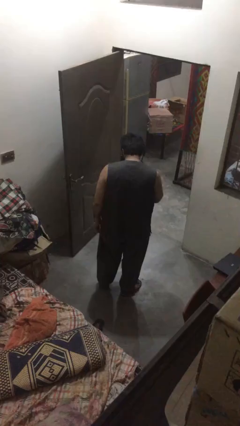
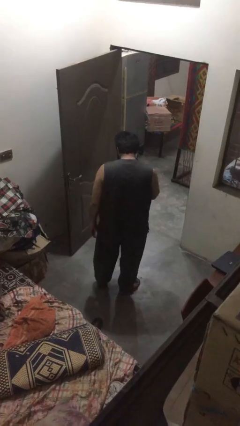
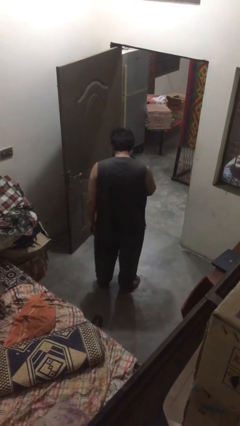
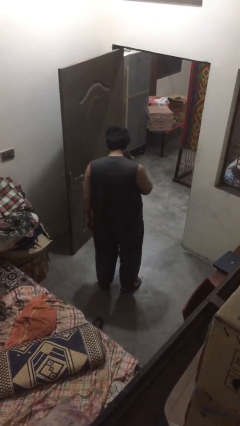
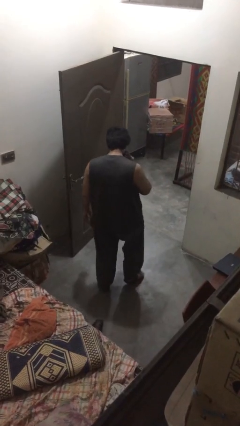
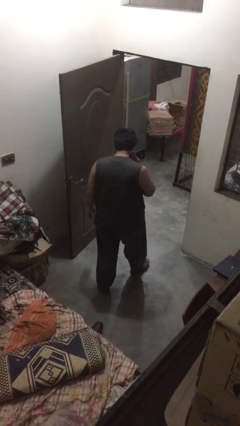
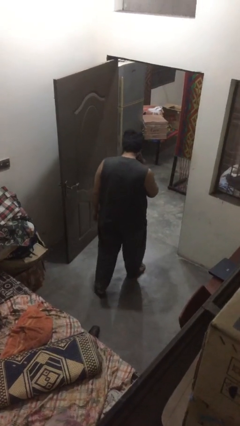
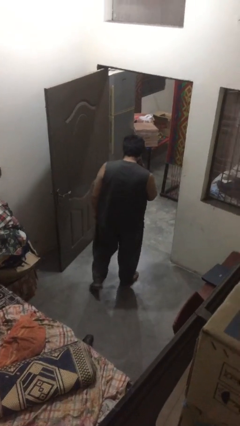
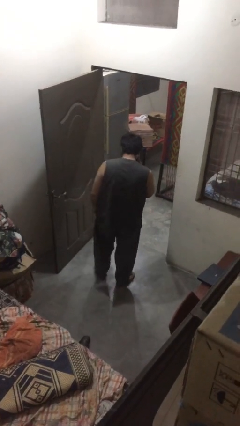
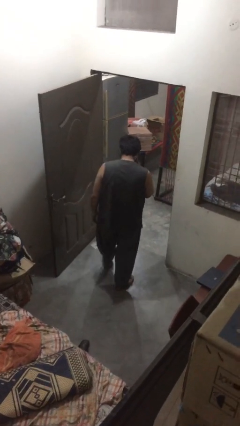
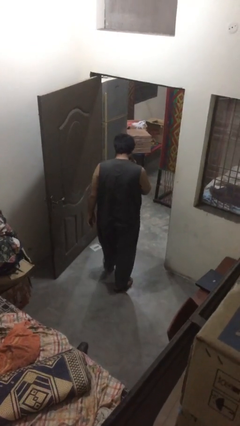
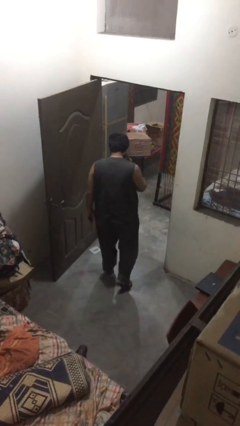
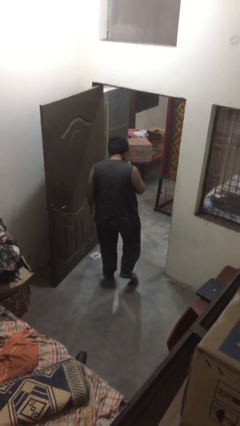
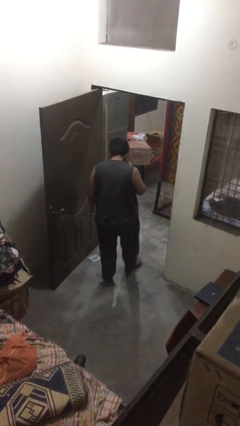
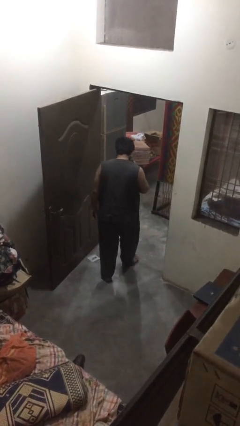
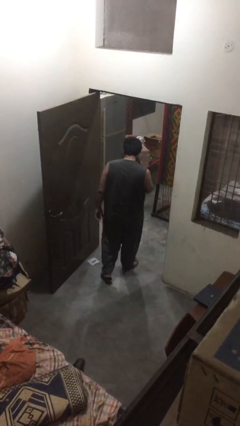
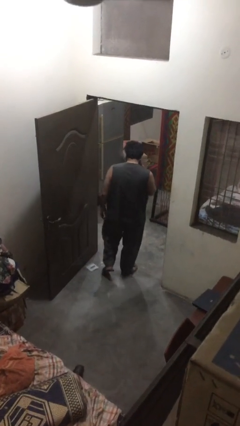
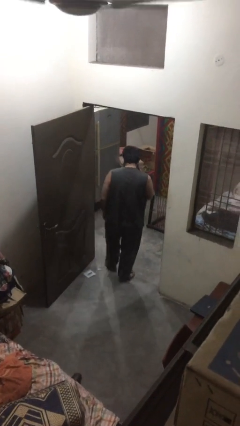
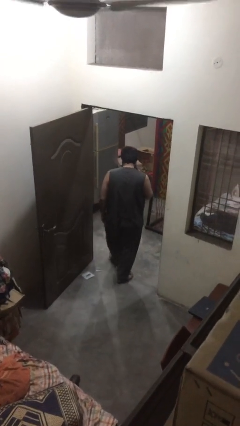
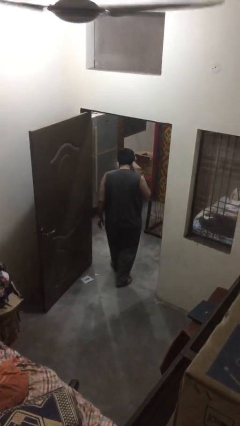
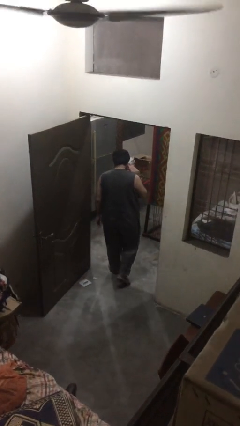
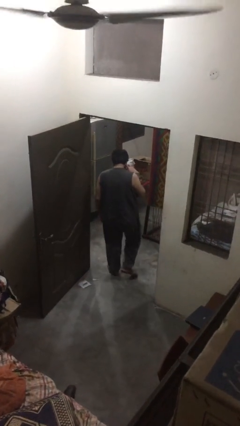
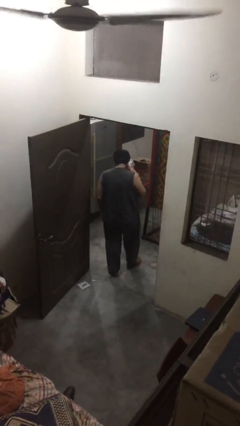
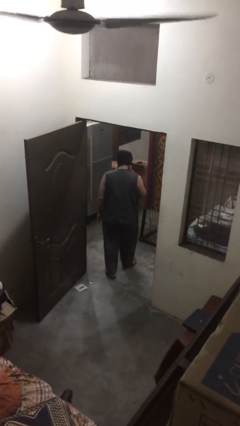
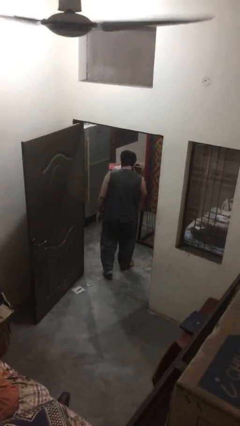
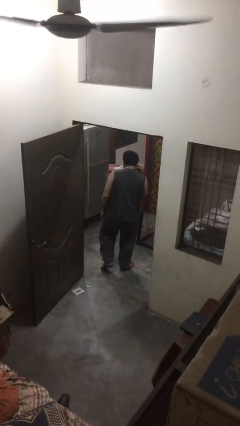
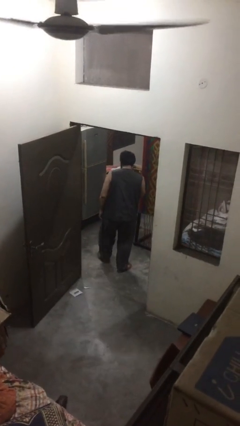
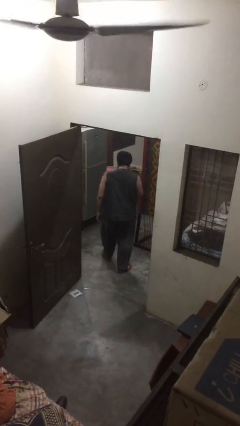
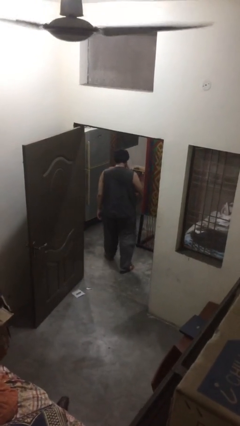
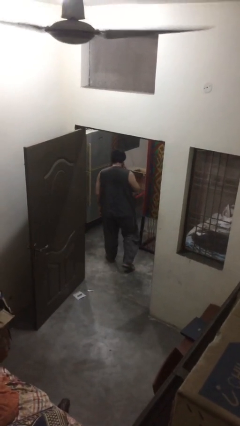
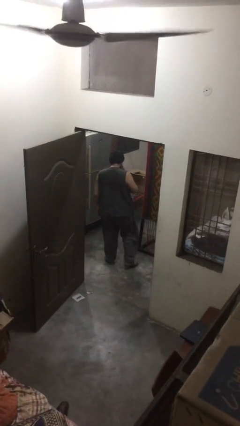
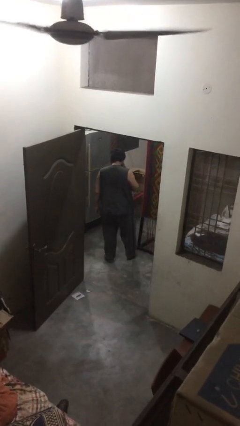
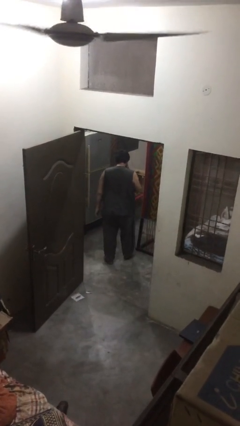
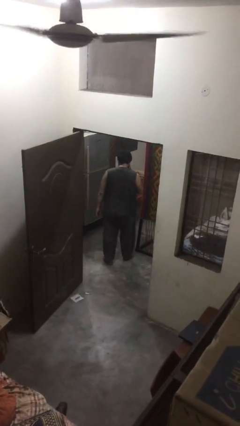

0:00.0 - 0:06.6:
person exits scene through structure

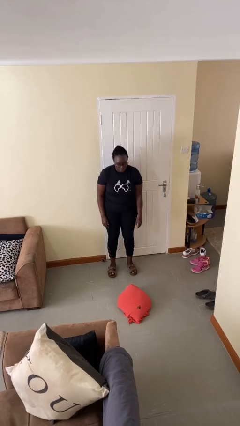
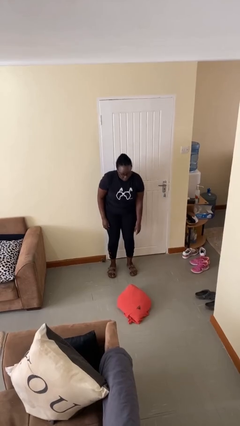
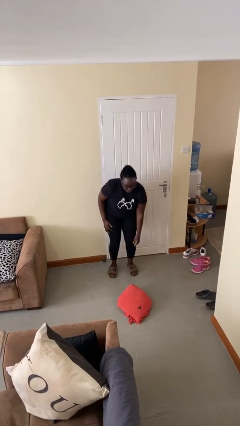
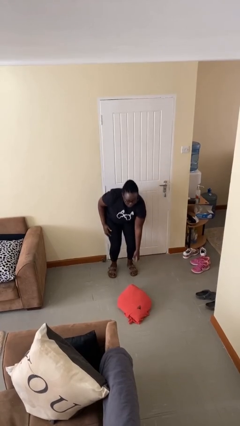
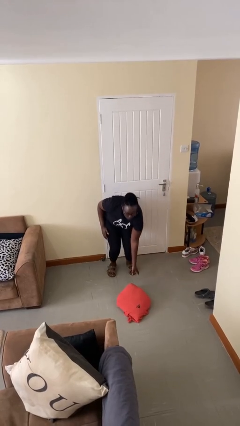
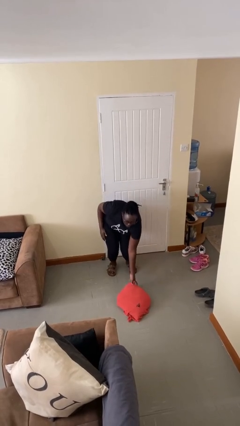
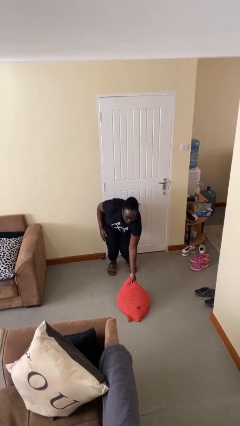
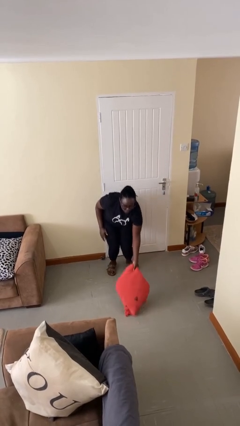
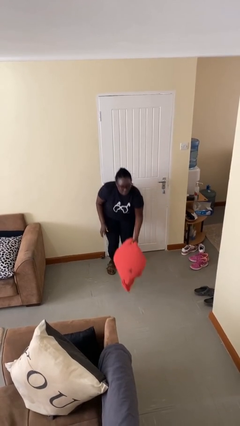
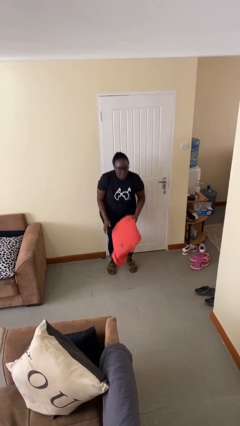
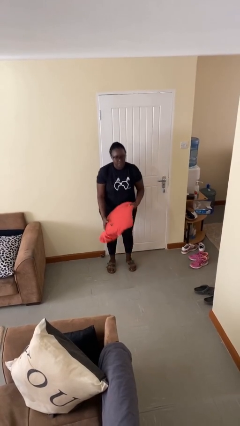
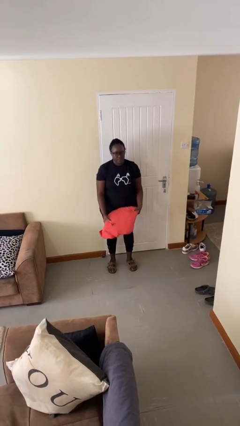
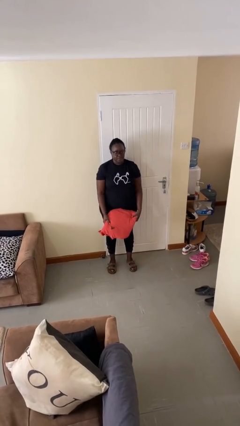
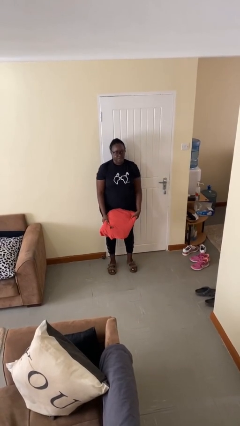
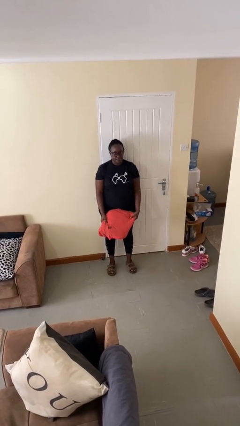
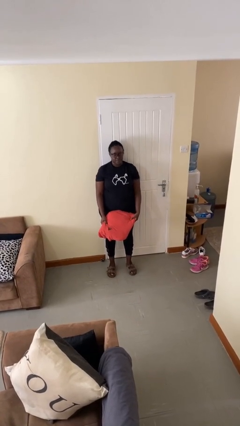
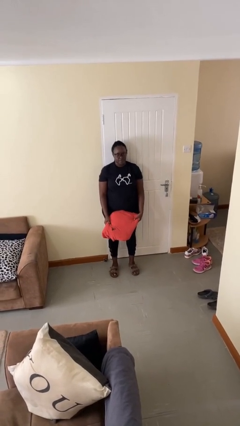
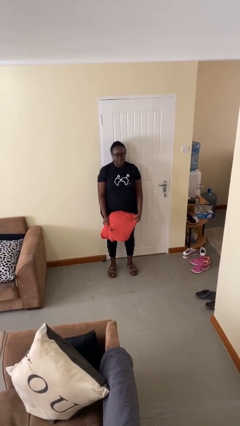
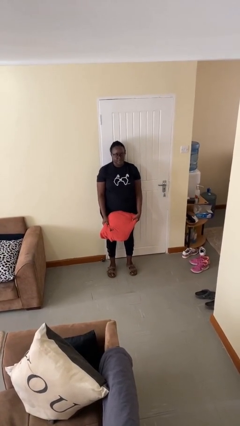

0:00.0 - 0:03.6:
person picks up object from floor

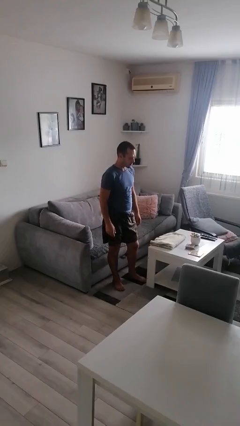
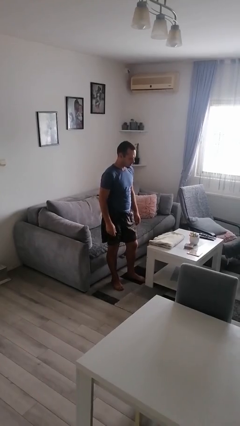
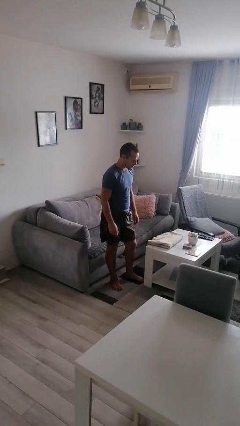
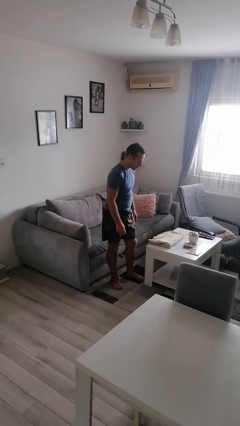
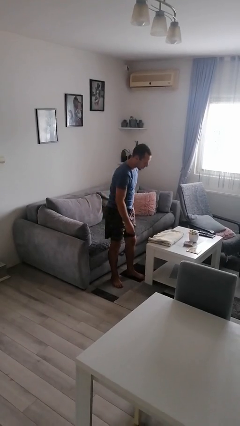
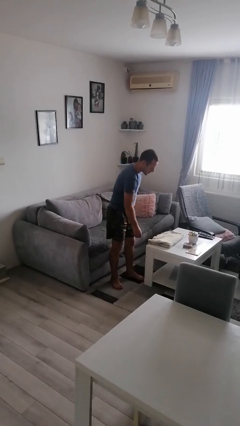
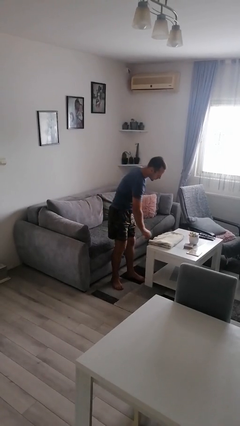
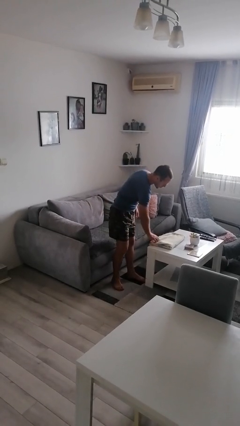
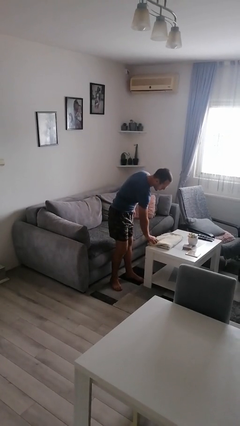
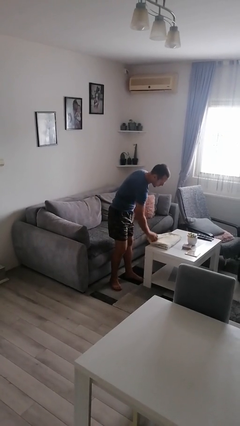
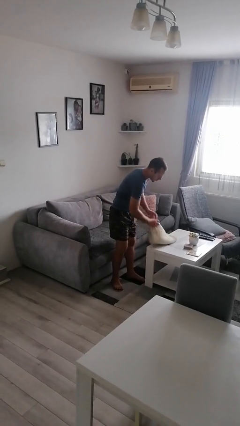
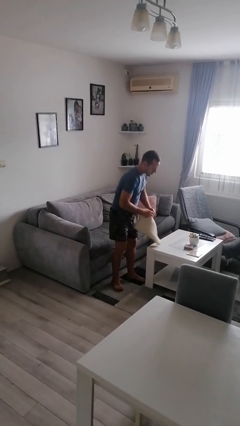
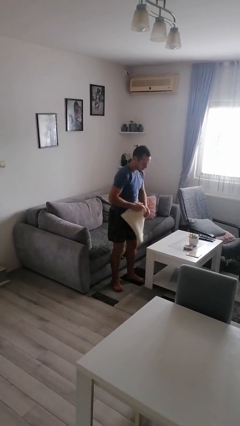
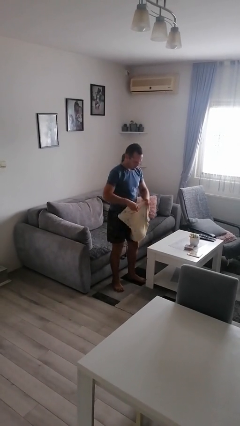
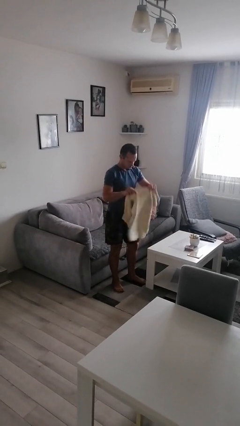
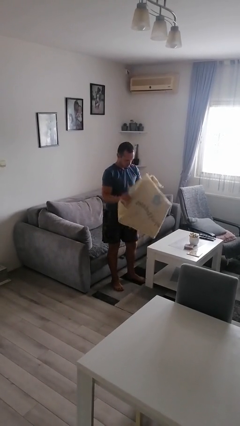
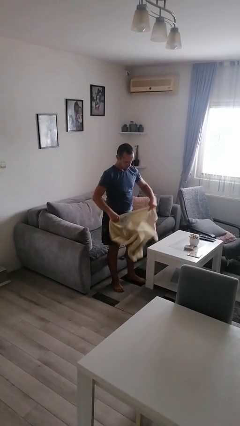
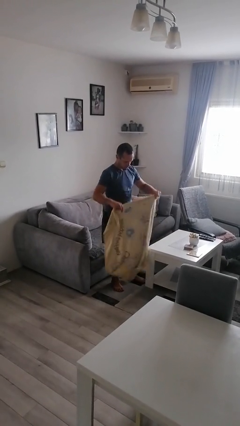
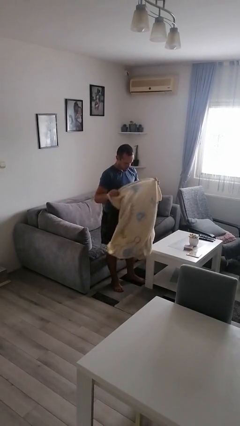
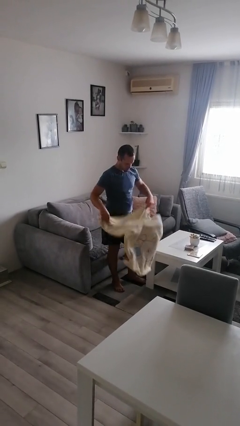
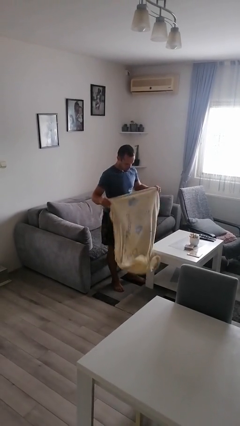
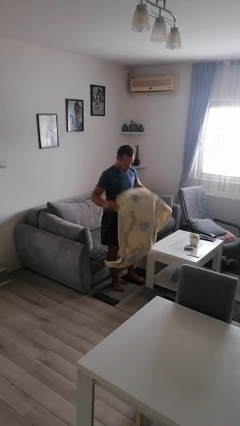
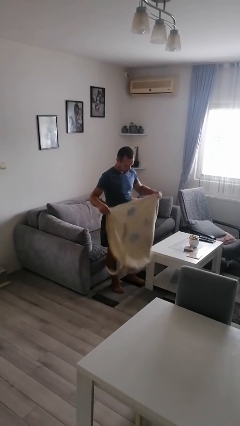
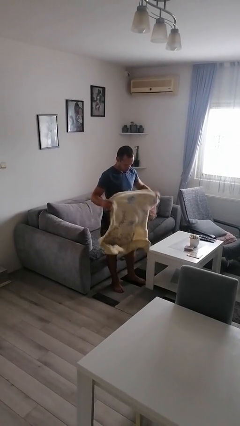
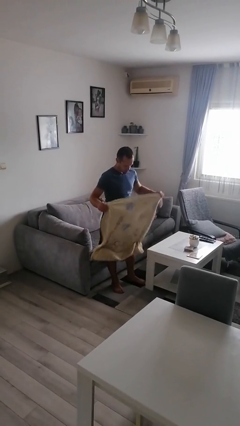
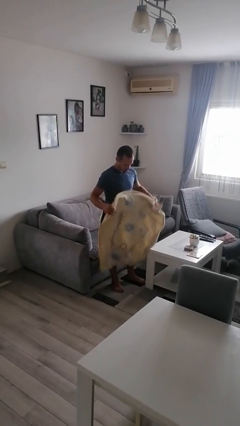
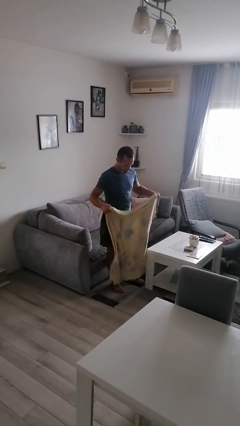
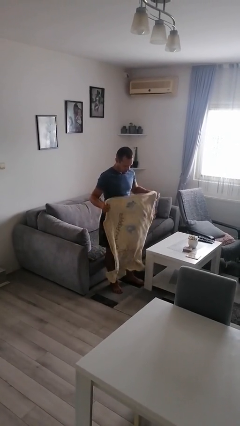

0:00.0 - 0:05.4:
person unfolds blanket

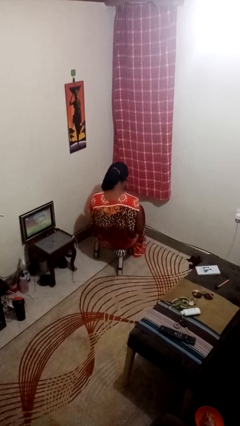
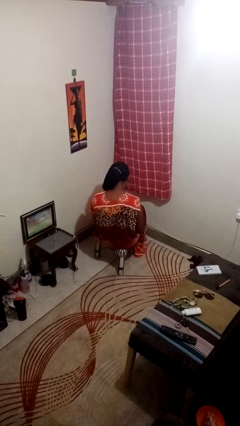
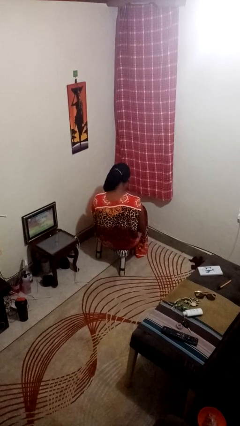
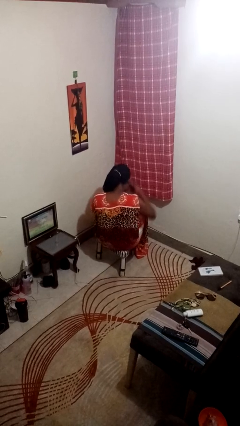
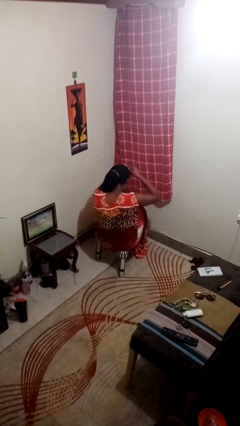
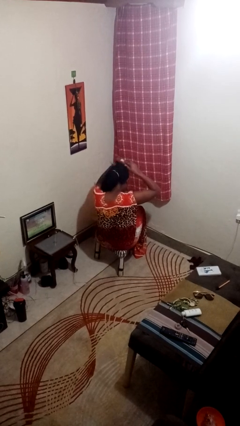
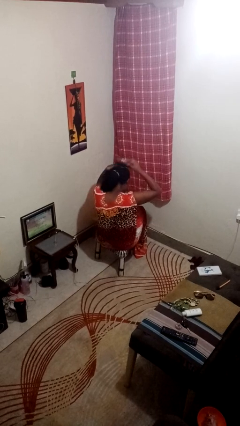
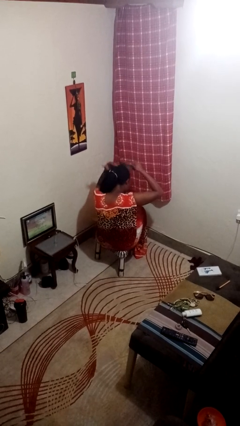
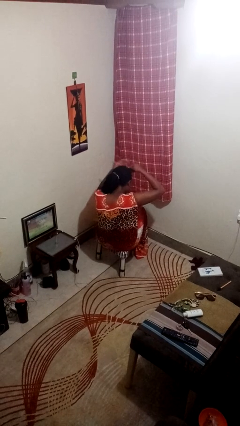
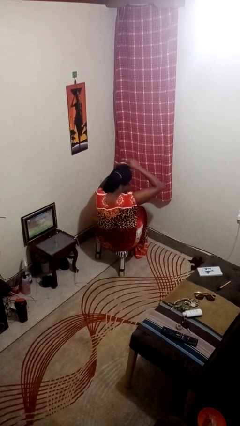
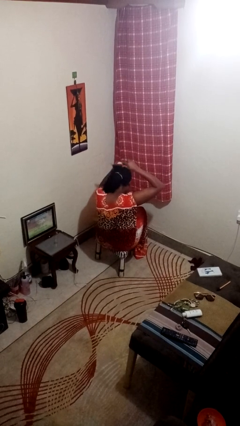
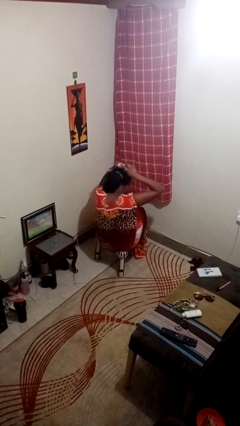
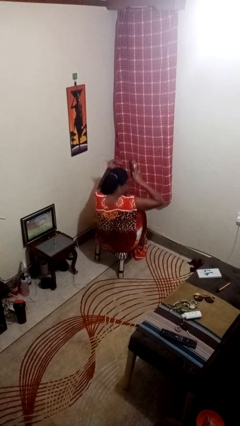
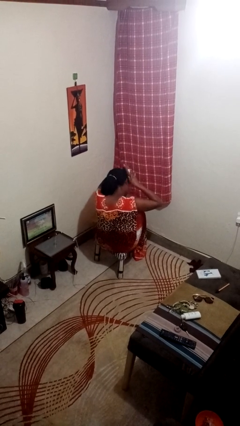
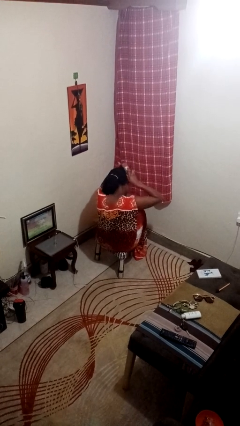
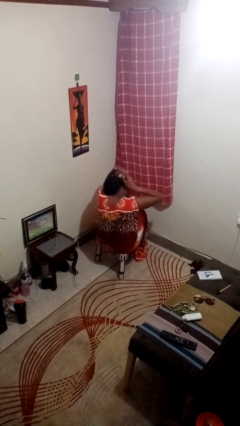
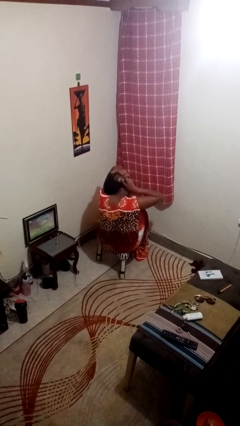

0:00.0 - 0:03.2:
person brushes hair
